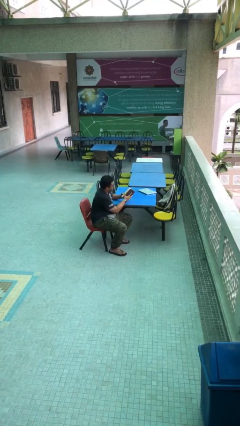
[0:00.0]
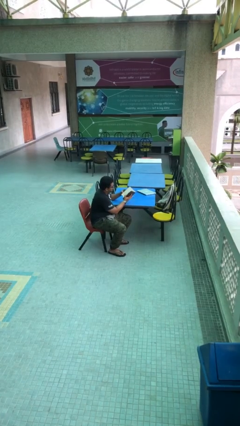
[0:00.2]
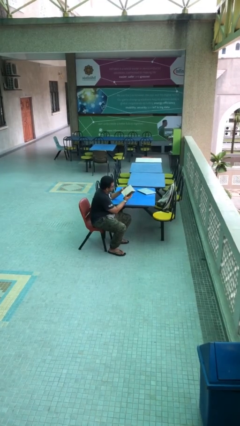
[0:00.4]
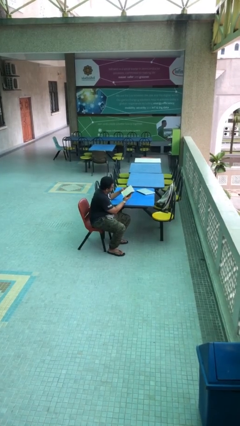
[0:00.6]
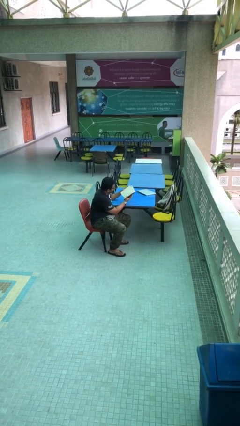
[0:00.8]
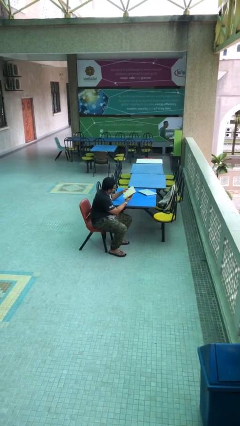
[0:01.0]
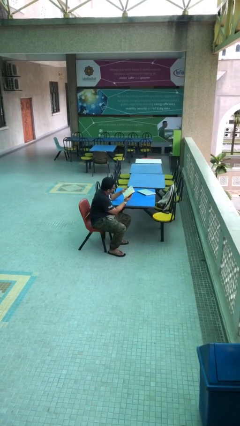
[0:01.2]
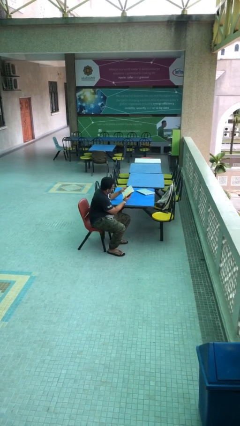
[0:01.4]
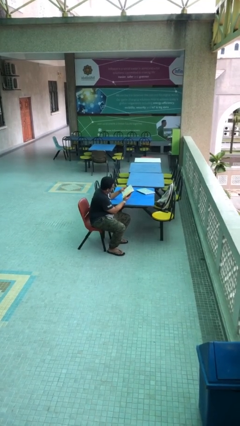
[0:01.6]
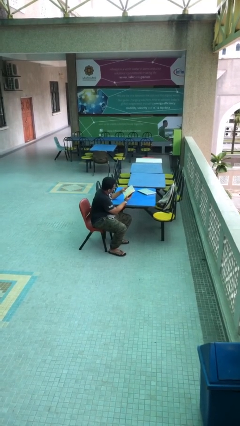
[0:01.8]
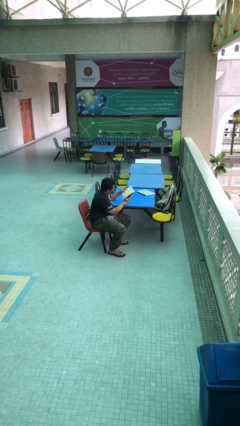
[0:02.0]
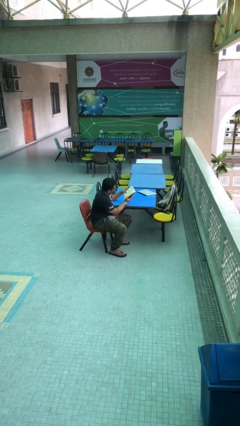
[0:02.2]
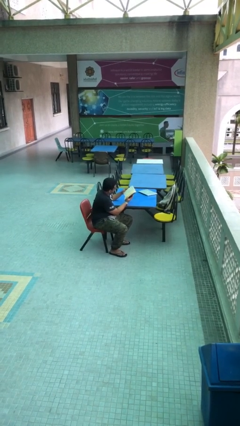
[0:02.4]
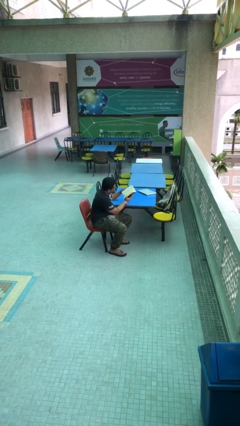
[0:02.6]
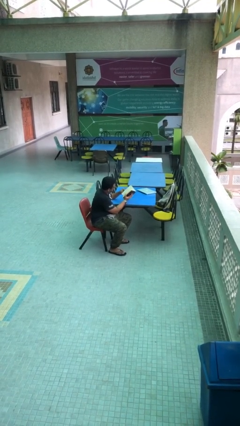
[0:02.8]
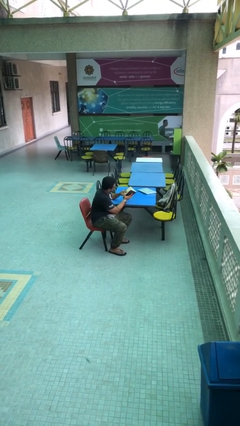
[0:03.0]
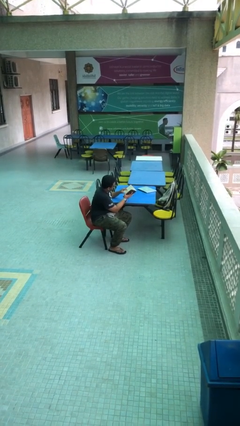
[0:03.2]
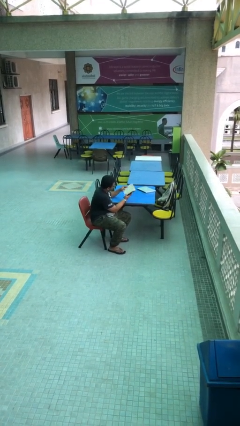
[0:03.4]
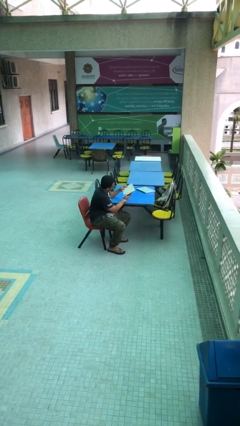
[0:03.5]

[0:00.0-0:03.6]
person reads document

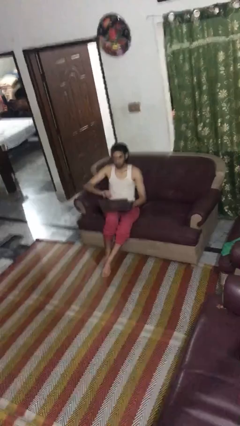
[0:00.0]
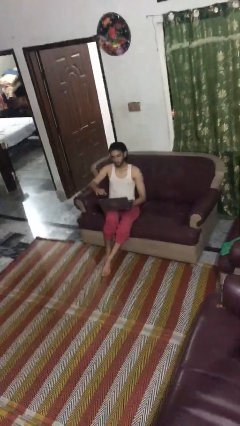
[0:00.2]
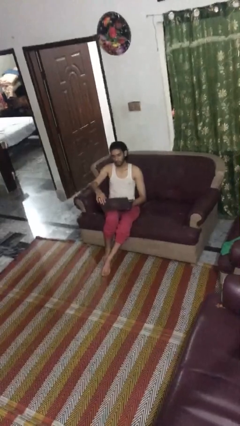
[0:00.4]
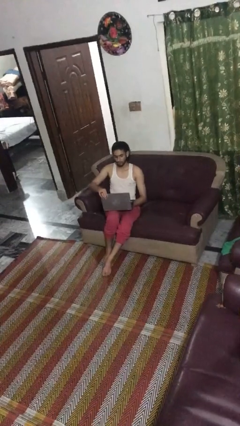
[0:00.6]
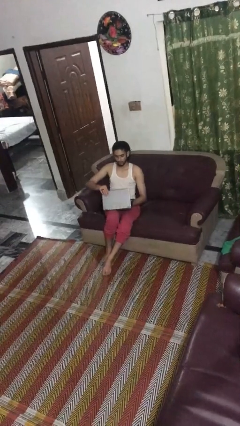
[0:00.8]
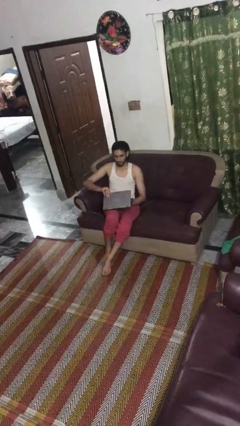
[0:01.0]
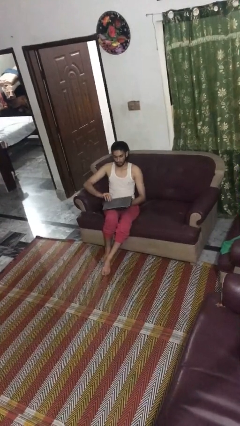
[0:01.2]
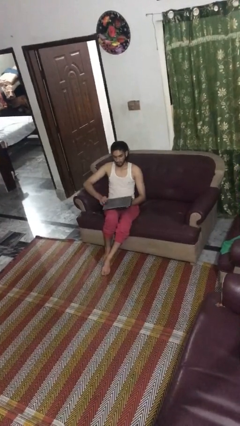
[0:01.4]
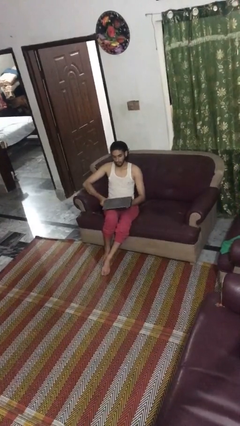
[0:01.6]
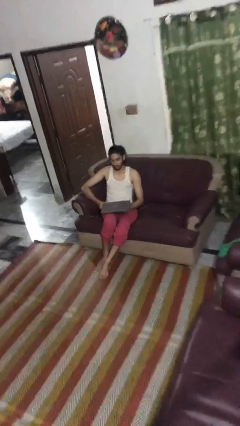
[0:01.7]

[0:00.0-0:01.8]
person closes laptop

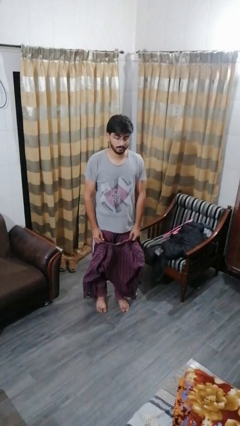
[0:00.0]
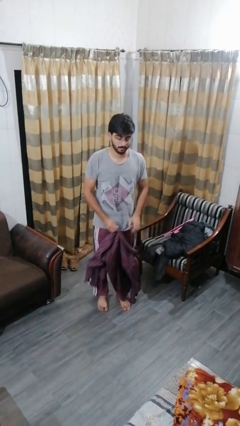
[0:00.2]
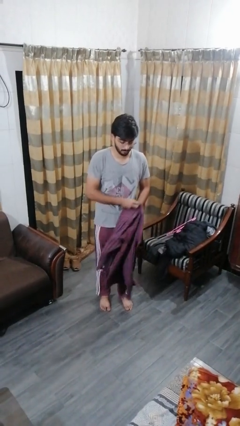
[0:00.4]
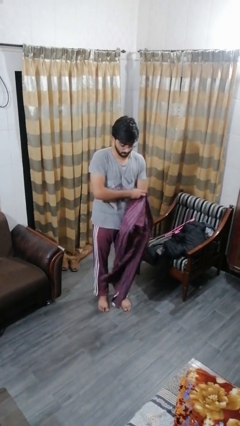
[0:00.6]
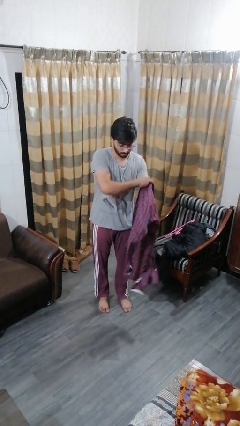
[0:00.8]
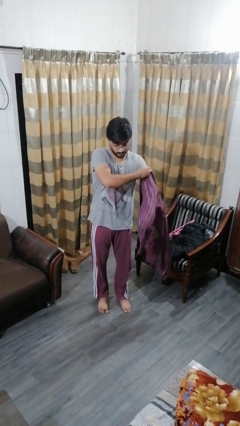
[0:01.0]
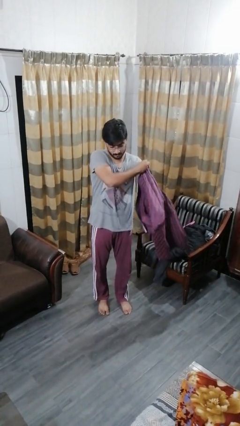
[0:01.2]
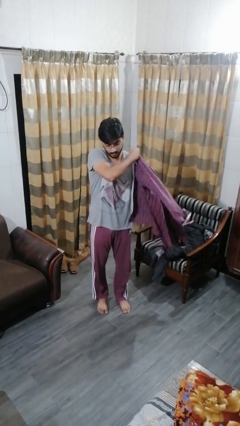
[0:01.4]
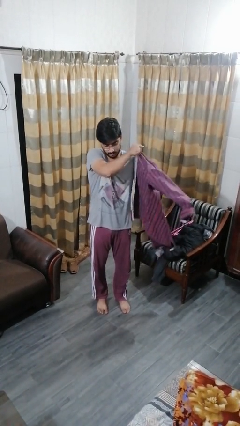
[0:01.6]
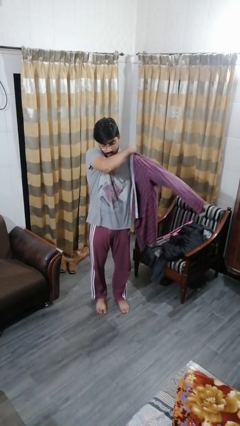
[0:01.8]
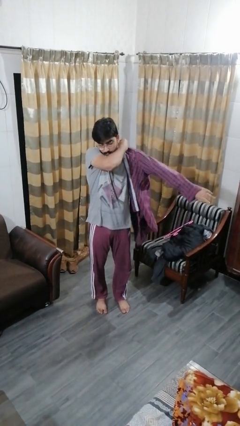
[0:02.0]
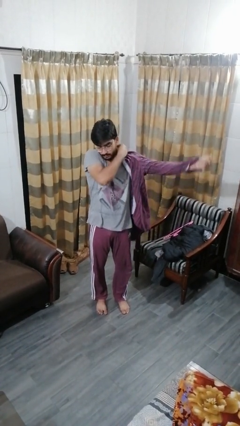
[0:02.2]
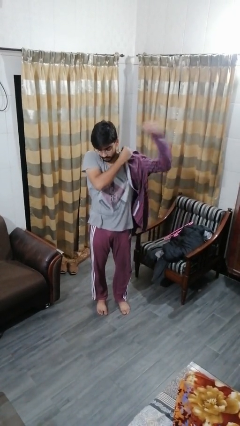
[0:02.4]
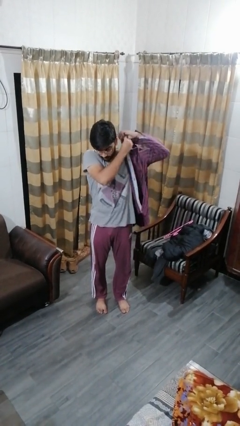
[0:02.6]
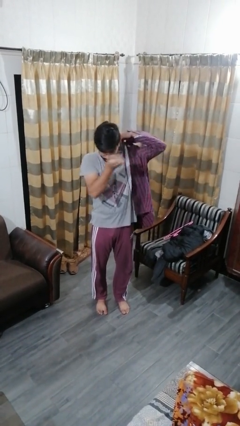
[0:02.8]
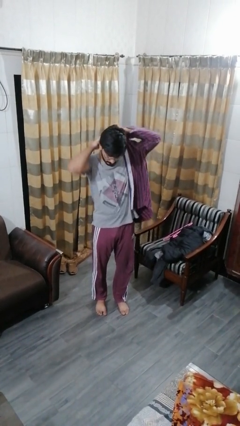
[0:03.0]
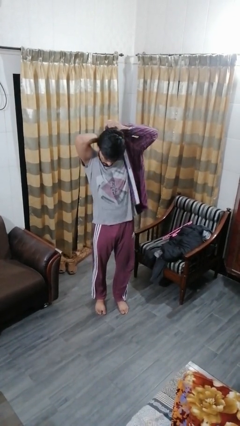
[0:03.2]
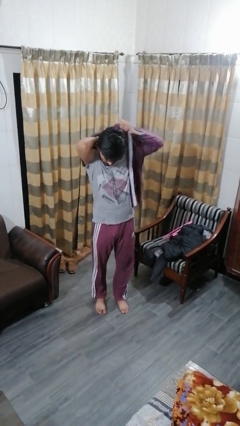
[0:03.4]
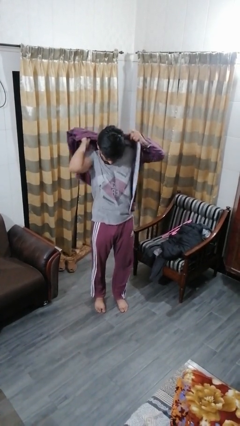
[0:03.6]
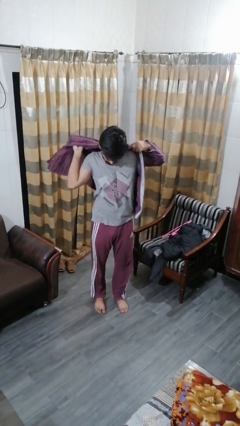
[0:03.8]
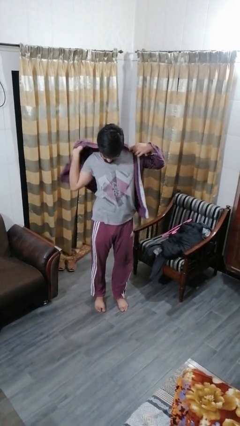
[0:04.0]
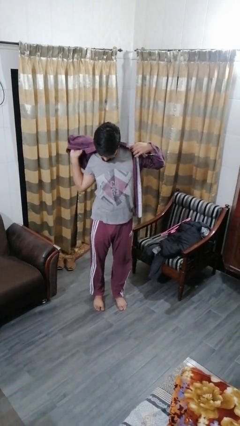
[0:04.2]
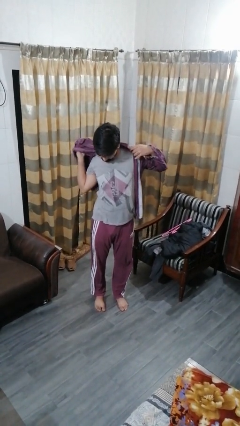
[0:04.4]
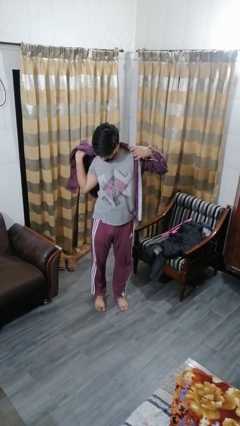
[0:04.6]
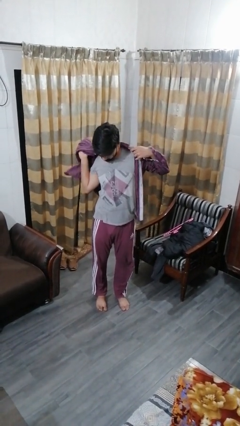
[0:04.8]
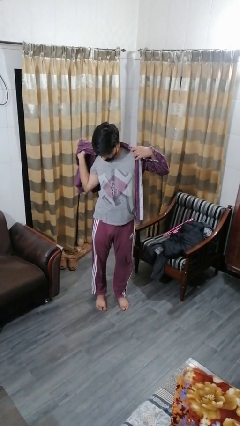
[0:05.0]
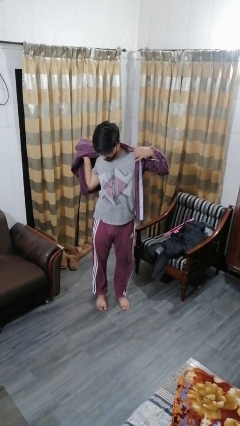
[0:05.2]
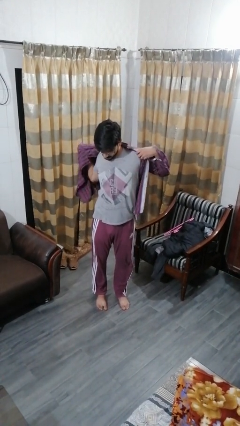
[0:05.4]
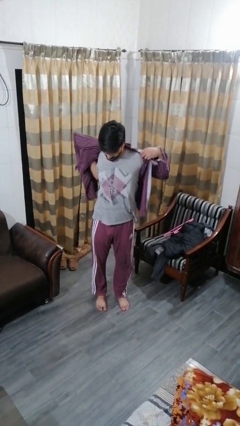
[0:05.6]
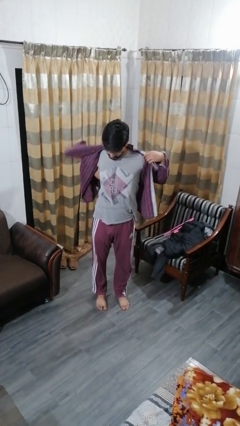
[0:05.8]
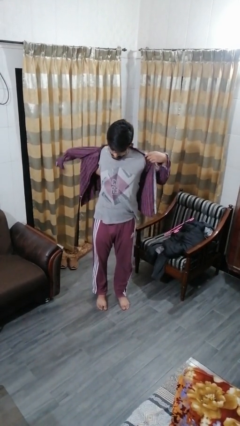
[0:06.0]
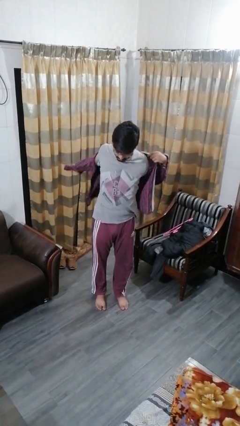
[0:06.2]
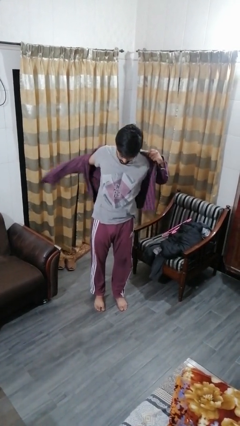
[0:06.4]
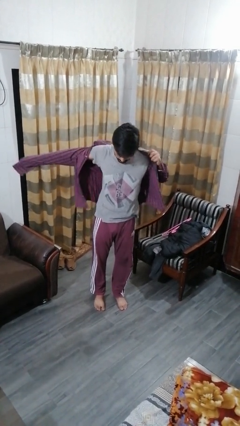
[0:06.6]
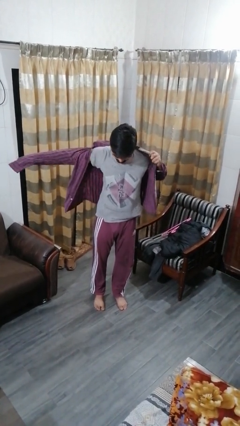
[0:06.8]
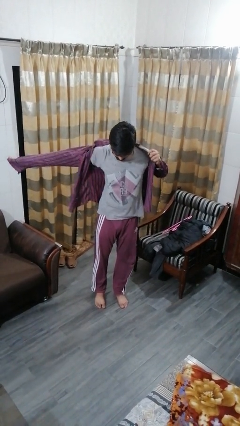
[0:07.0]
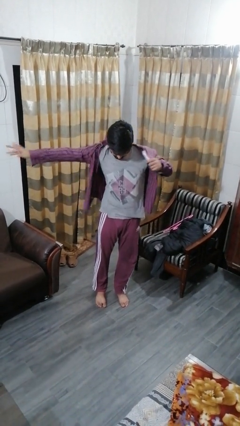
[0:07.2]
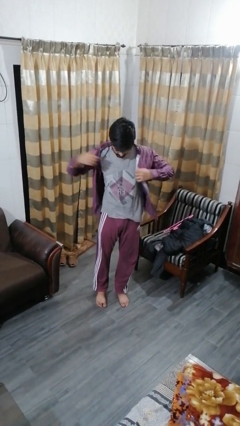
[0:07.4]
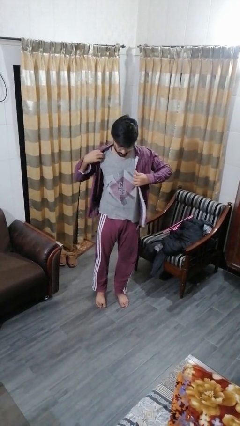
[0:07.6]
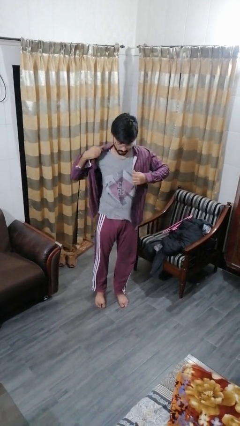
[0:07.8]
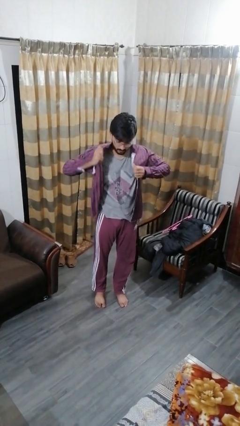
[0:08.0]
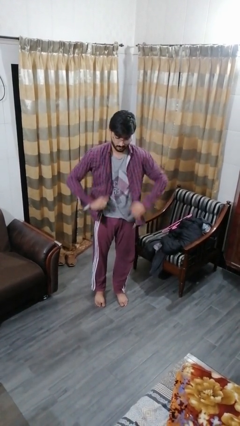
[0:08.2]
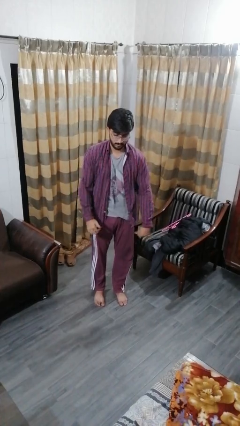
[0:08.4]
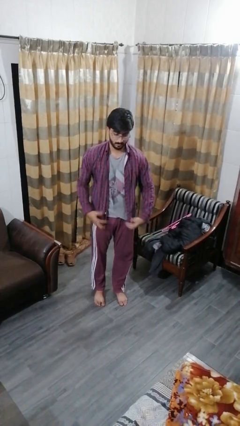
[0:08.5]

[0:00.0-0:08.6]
person puts on shirt

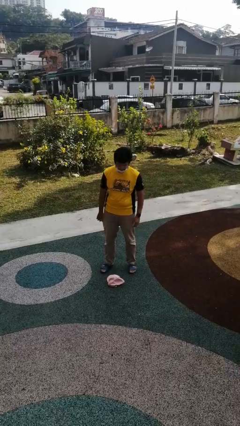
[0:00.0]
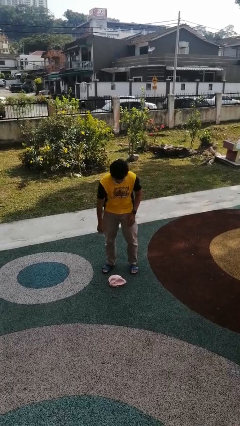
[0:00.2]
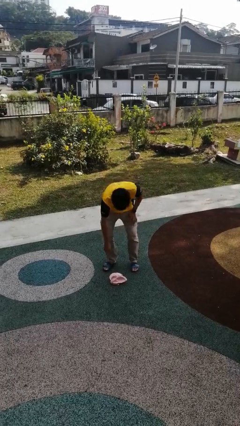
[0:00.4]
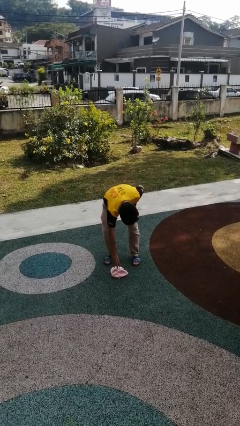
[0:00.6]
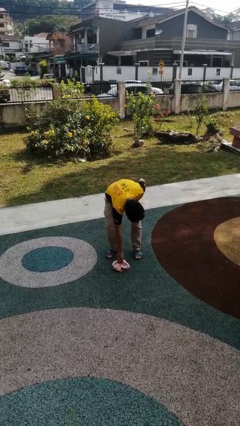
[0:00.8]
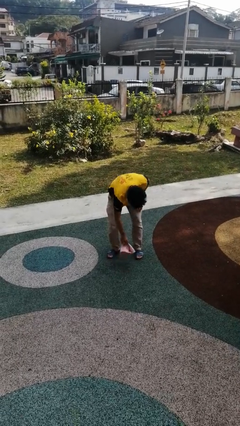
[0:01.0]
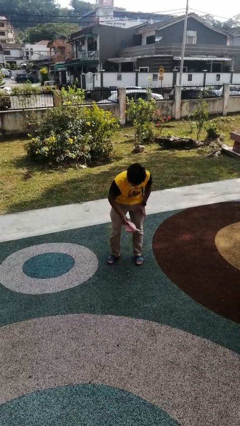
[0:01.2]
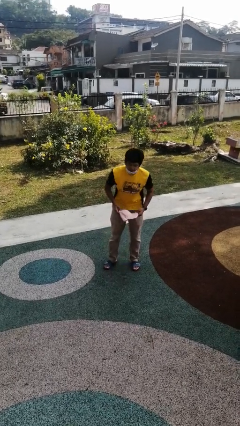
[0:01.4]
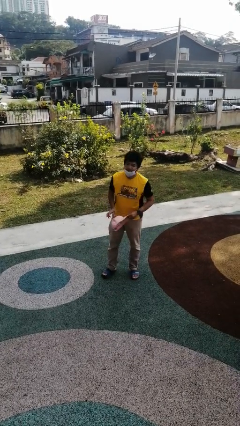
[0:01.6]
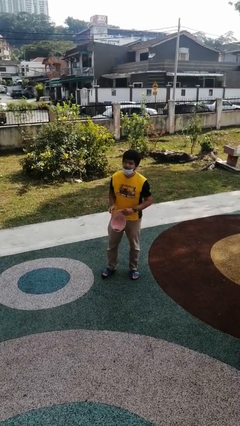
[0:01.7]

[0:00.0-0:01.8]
person picks up object from floor

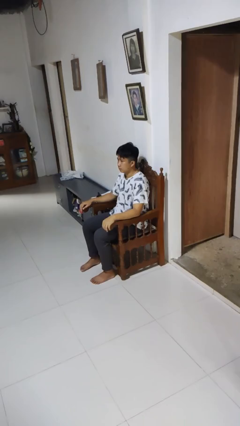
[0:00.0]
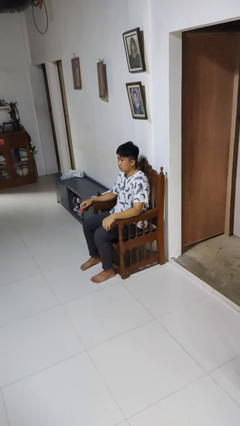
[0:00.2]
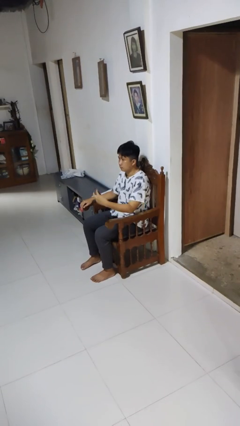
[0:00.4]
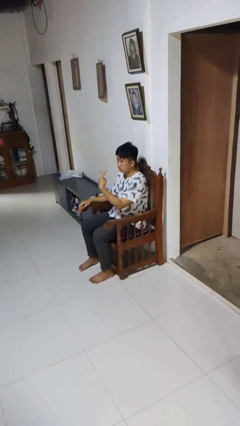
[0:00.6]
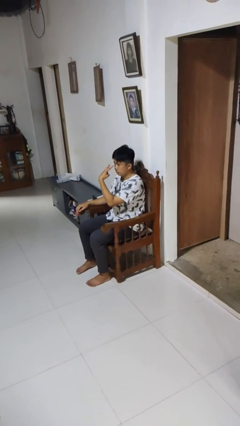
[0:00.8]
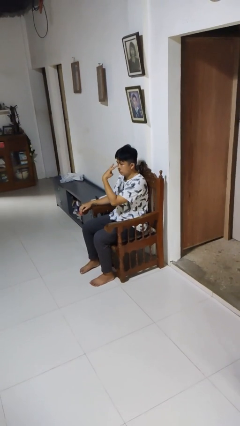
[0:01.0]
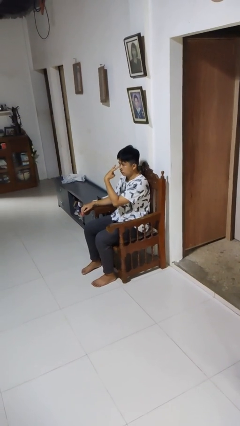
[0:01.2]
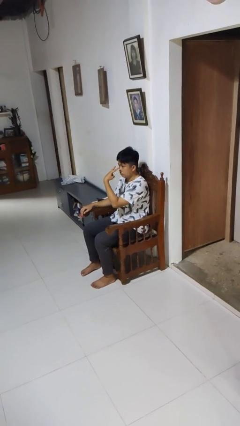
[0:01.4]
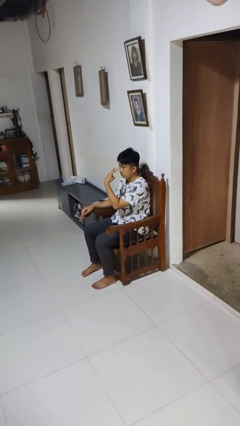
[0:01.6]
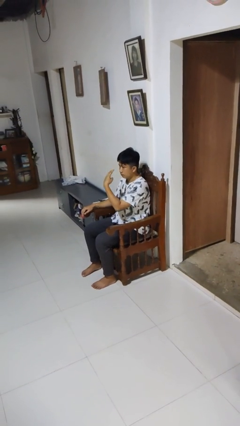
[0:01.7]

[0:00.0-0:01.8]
person gestures watch closely

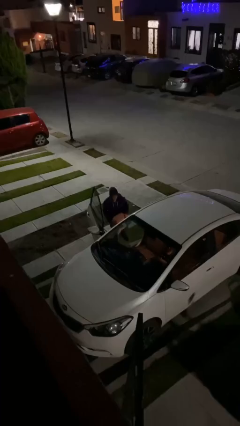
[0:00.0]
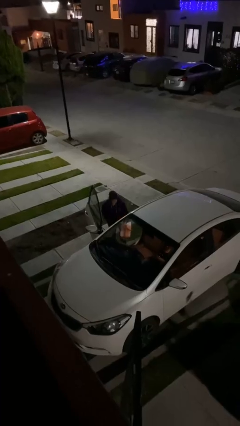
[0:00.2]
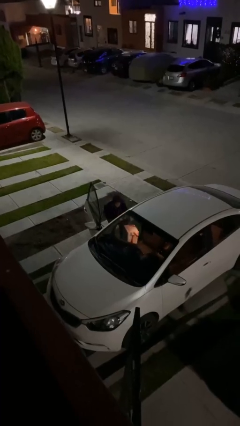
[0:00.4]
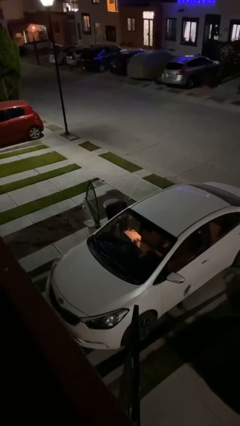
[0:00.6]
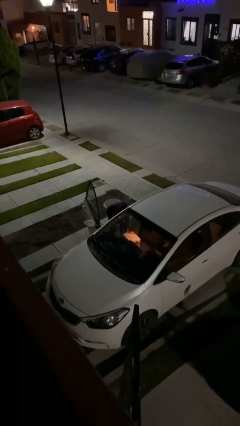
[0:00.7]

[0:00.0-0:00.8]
person loads car
